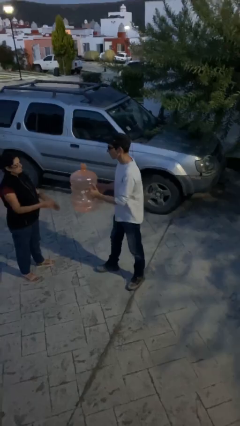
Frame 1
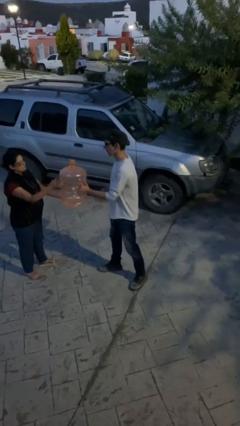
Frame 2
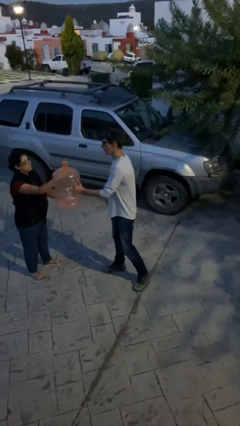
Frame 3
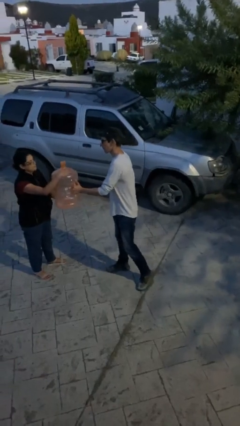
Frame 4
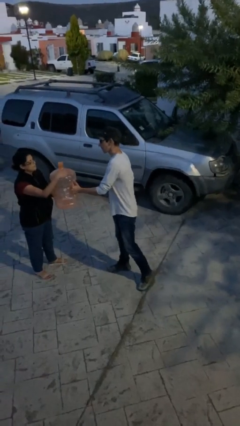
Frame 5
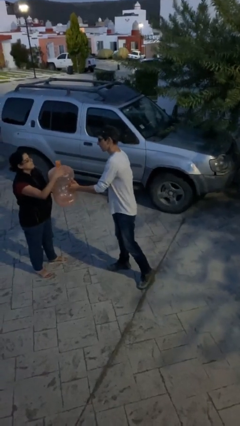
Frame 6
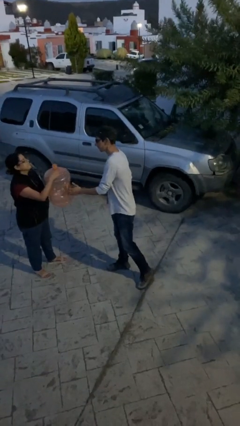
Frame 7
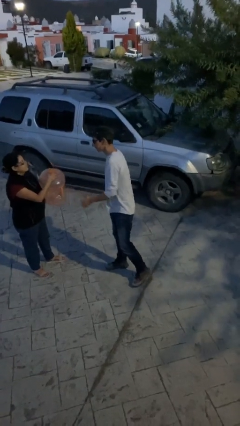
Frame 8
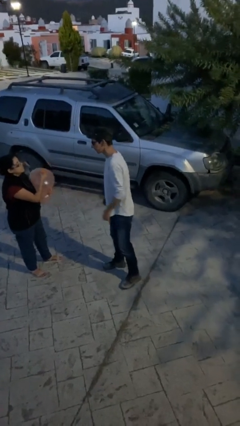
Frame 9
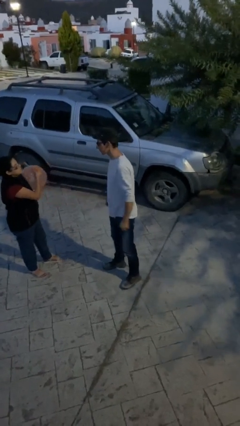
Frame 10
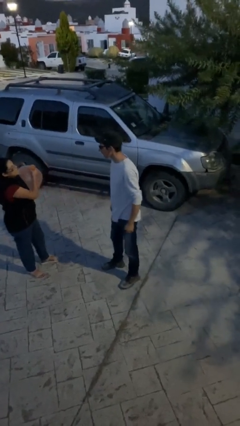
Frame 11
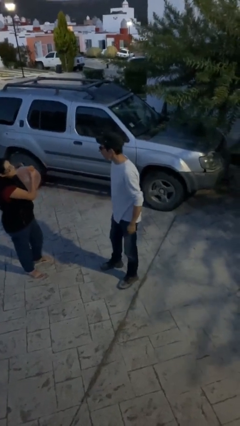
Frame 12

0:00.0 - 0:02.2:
person transfers object to person

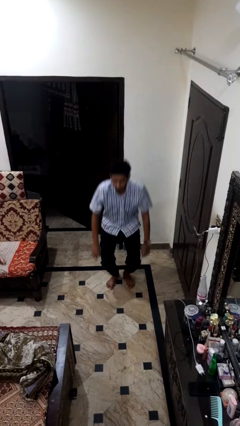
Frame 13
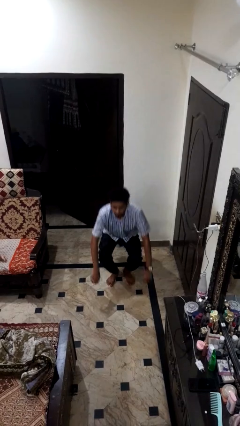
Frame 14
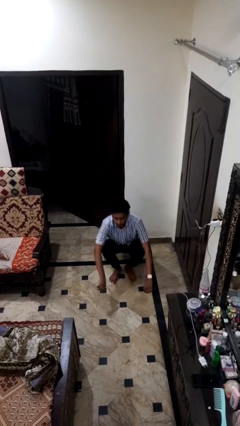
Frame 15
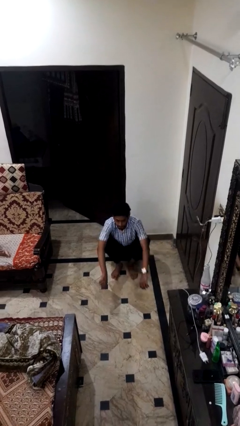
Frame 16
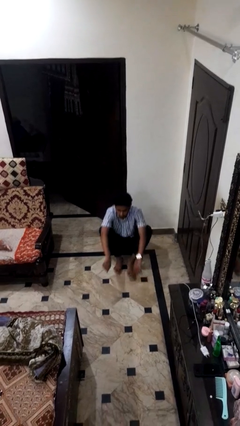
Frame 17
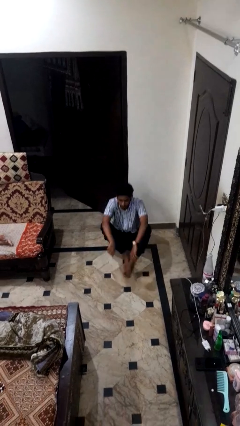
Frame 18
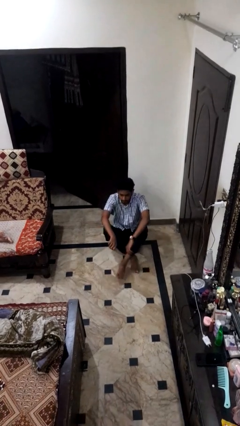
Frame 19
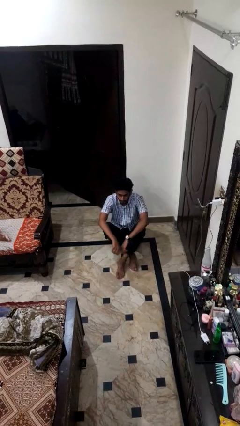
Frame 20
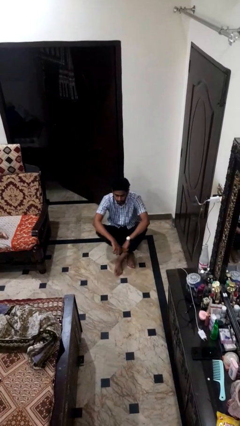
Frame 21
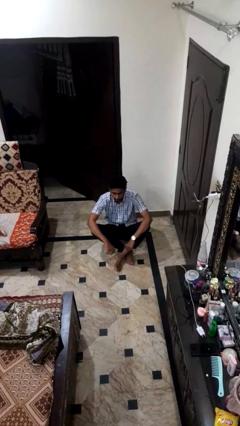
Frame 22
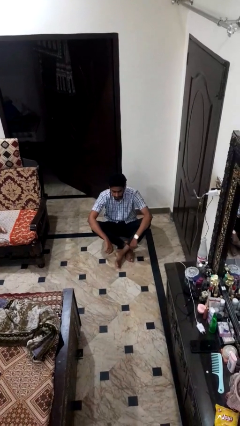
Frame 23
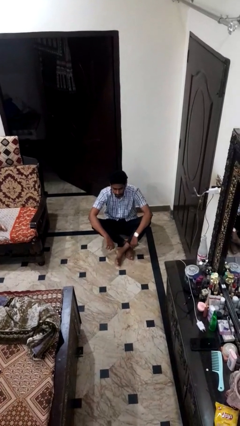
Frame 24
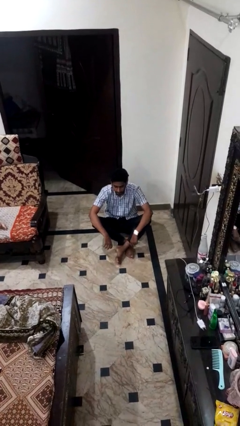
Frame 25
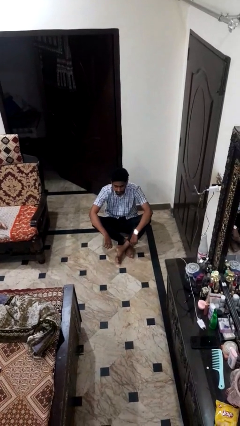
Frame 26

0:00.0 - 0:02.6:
person sits crisscross

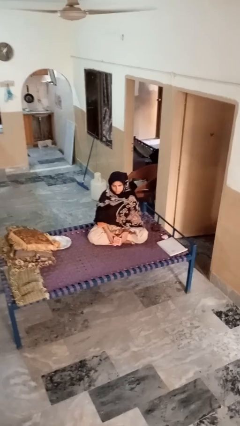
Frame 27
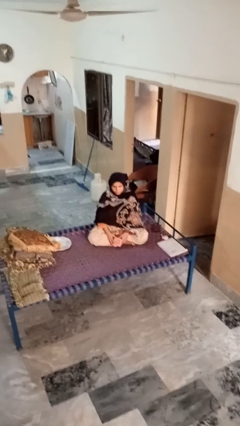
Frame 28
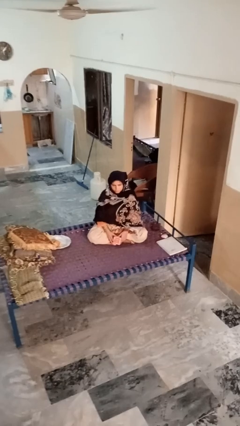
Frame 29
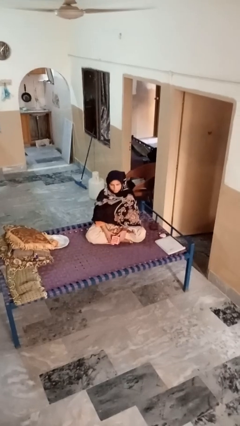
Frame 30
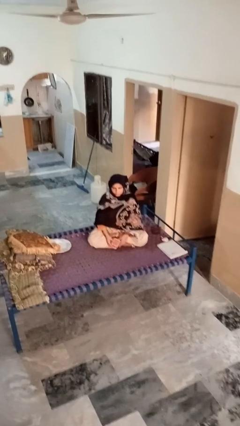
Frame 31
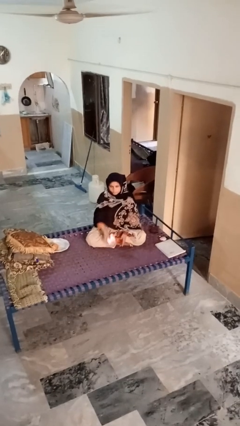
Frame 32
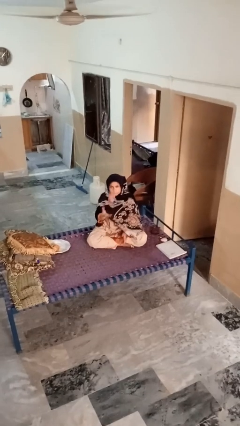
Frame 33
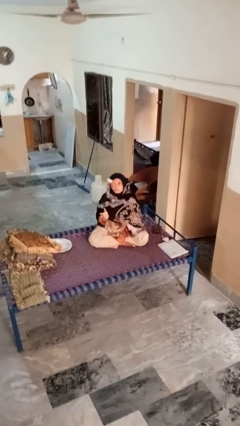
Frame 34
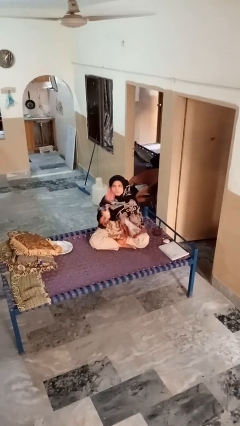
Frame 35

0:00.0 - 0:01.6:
person drops object

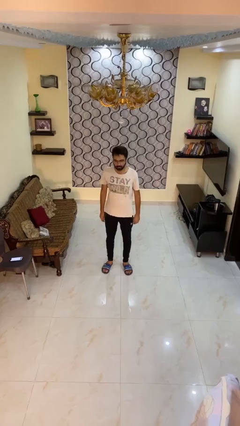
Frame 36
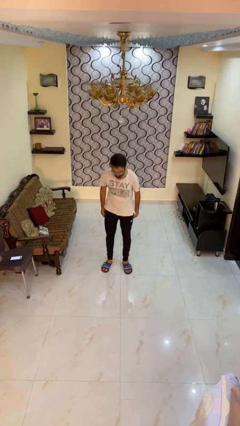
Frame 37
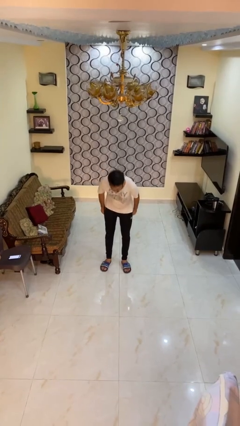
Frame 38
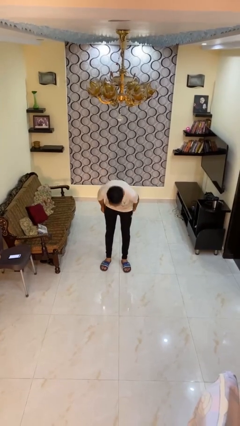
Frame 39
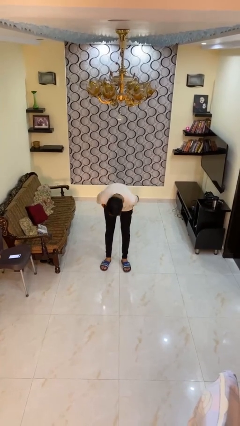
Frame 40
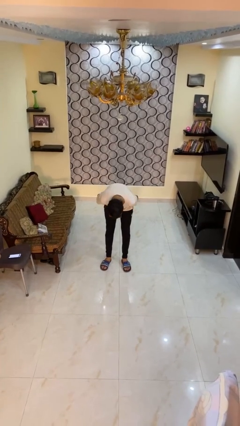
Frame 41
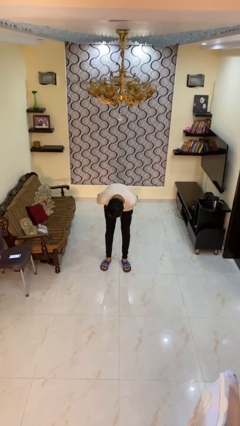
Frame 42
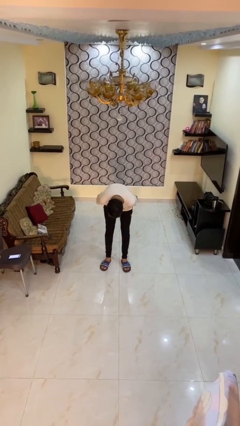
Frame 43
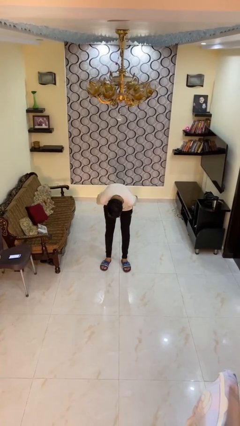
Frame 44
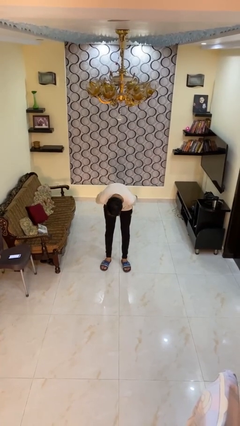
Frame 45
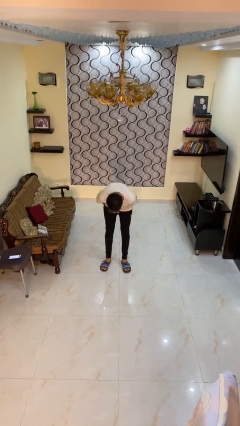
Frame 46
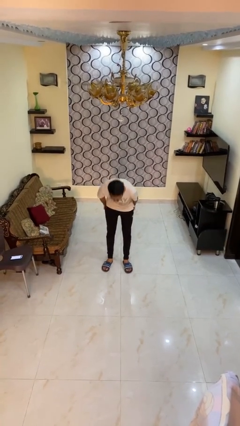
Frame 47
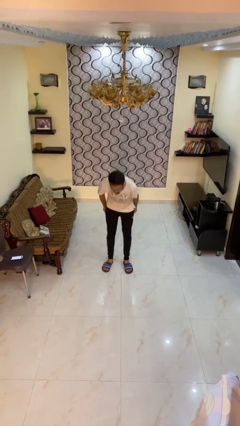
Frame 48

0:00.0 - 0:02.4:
person bows

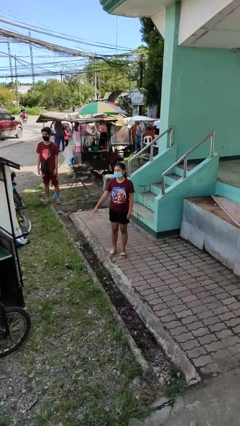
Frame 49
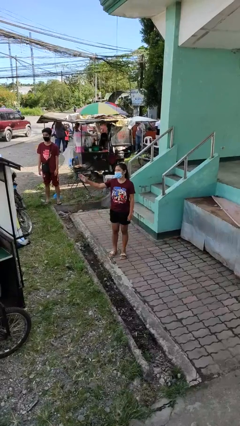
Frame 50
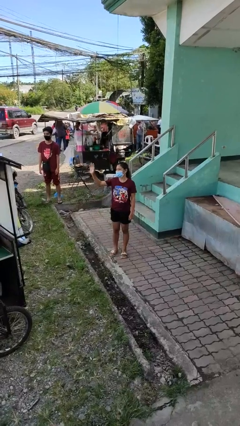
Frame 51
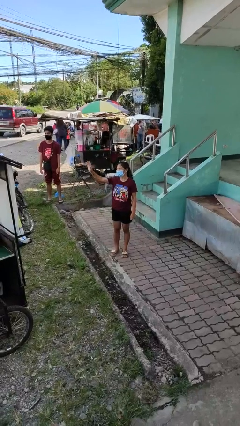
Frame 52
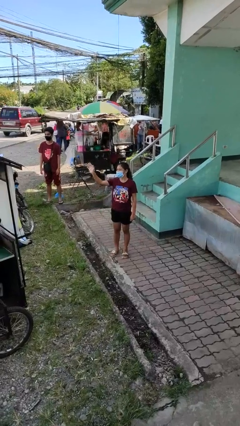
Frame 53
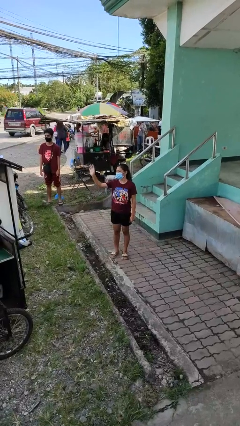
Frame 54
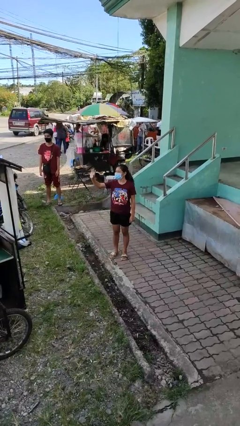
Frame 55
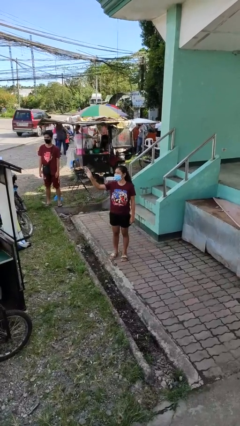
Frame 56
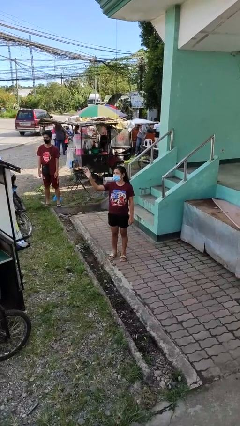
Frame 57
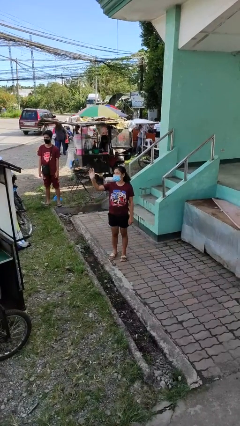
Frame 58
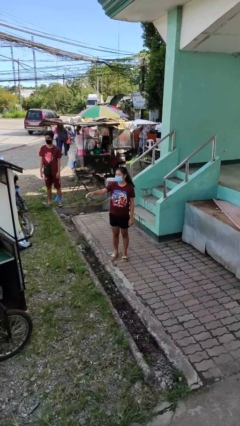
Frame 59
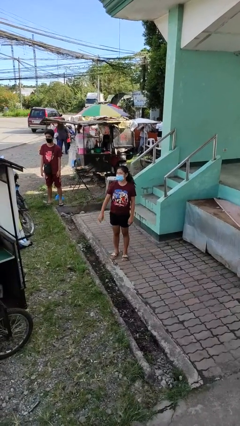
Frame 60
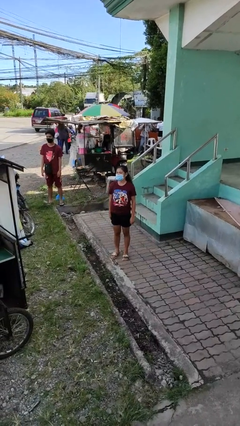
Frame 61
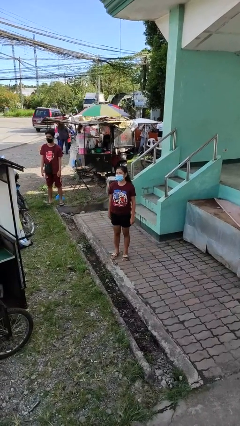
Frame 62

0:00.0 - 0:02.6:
person waves at person

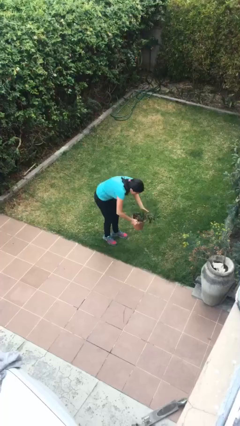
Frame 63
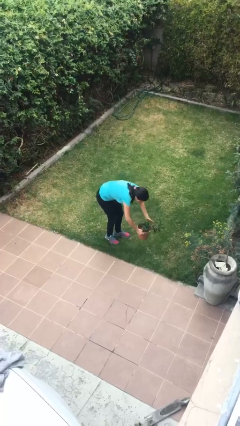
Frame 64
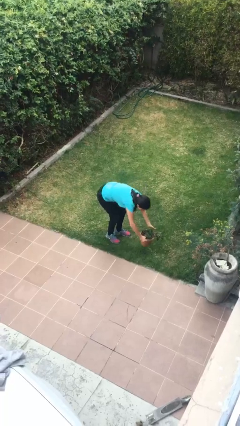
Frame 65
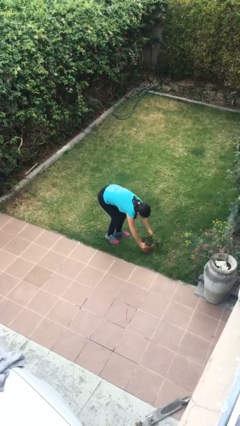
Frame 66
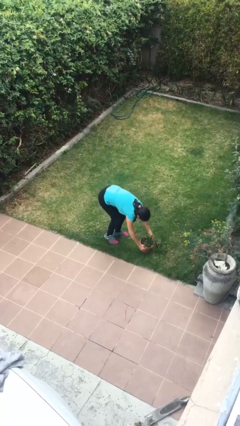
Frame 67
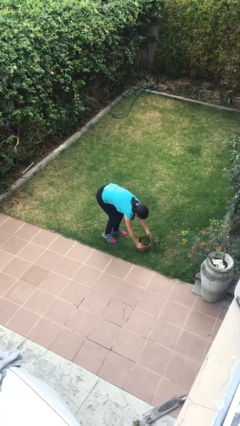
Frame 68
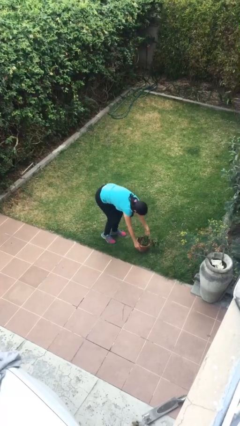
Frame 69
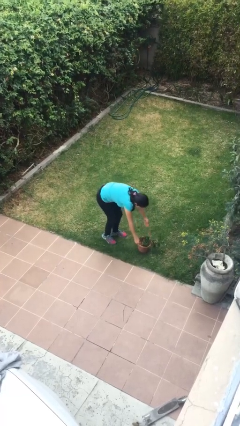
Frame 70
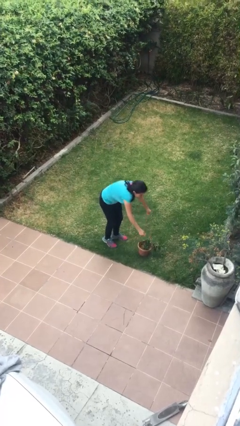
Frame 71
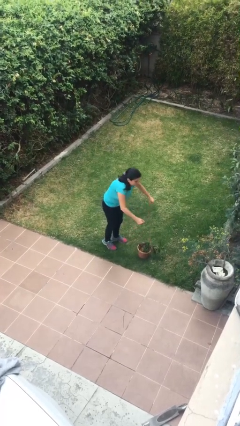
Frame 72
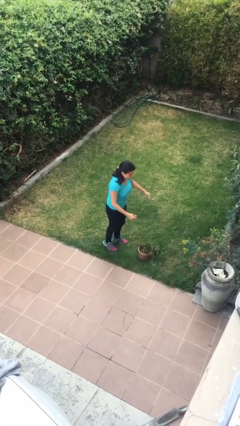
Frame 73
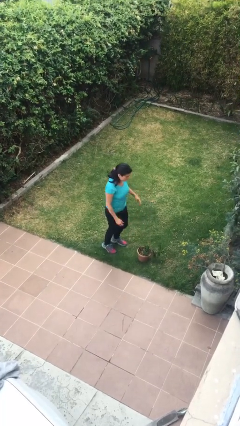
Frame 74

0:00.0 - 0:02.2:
person puts down object on floor

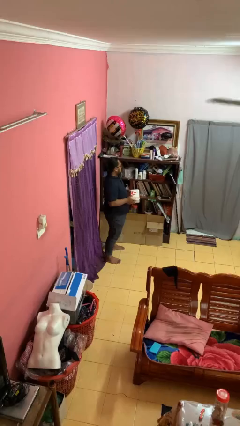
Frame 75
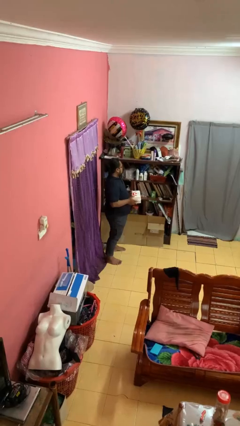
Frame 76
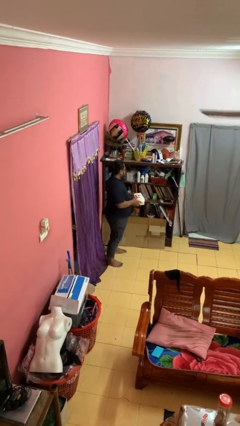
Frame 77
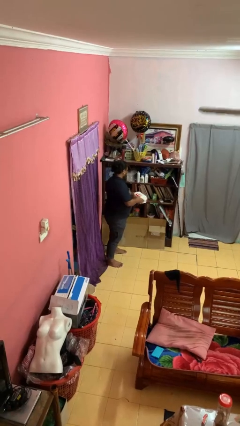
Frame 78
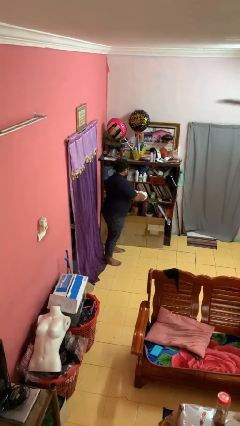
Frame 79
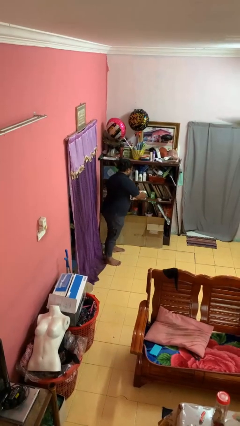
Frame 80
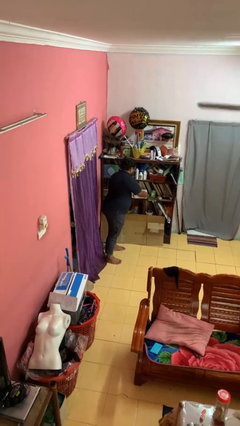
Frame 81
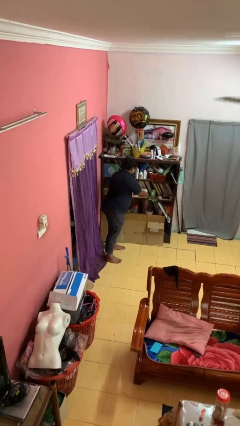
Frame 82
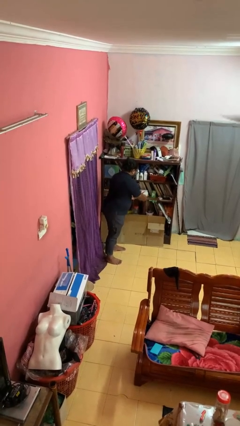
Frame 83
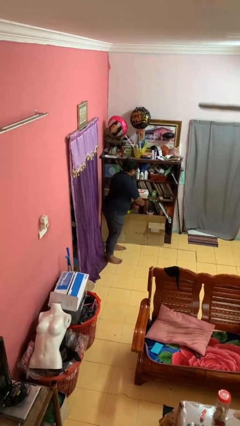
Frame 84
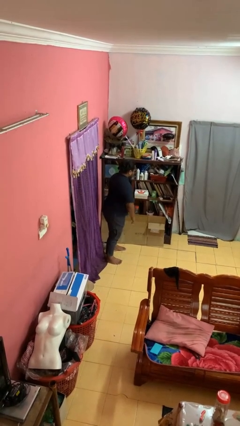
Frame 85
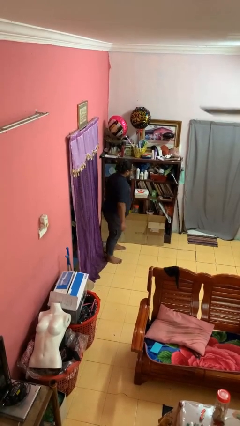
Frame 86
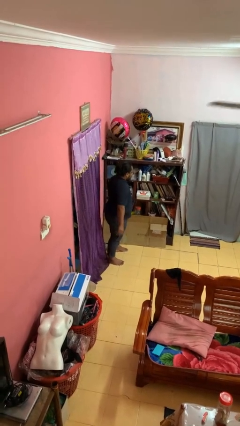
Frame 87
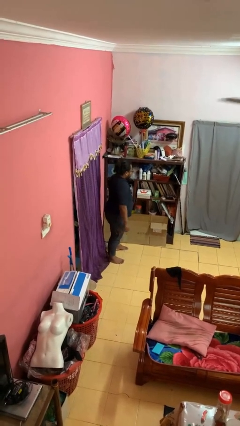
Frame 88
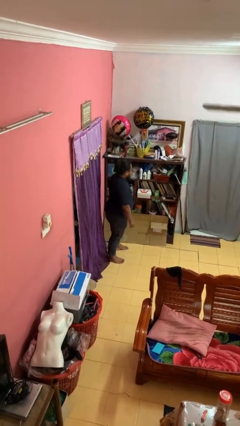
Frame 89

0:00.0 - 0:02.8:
person puts object in cabinet

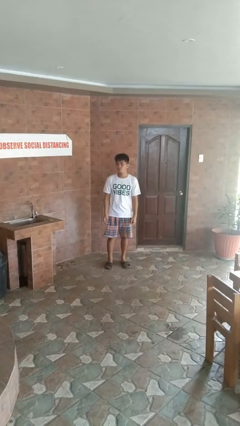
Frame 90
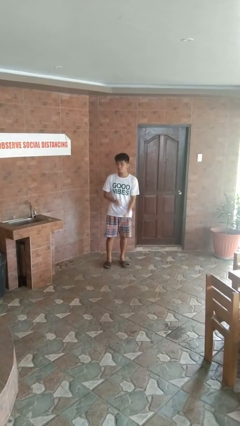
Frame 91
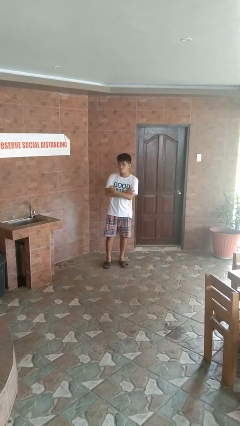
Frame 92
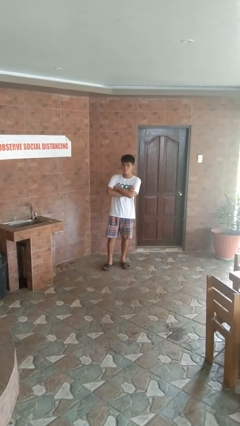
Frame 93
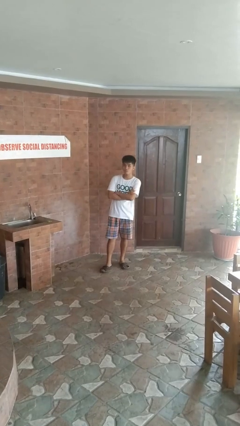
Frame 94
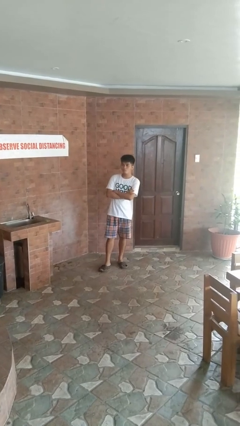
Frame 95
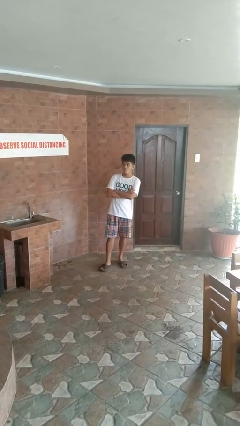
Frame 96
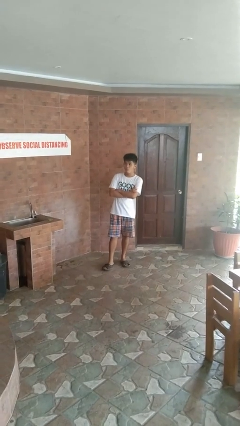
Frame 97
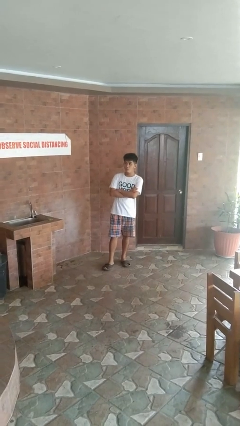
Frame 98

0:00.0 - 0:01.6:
person crosses arms
